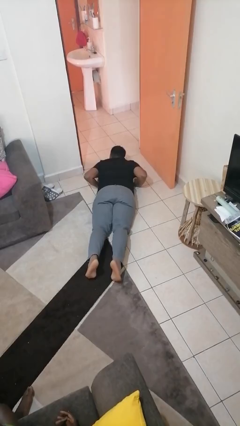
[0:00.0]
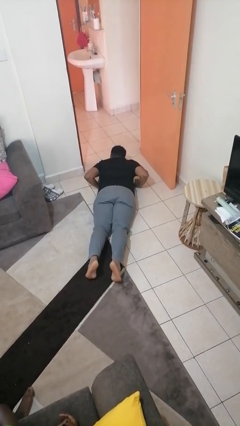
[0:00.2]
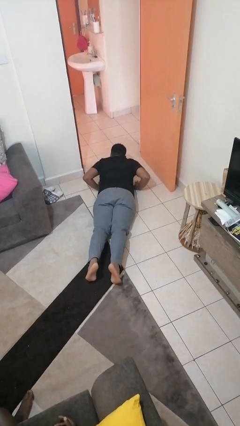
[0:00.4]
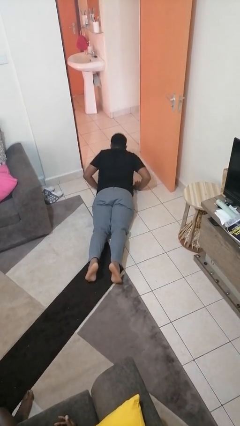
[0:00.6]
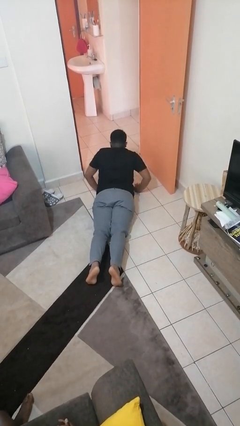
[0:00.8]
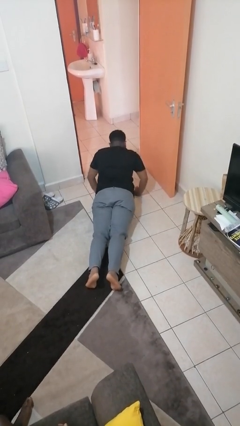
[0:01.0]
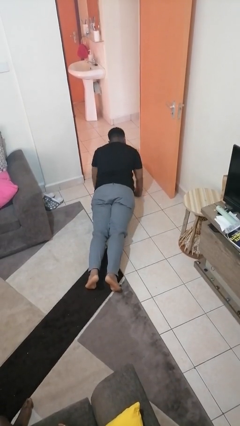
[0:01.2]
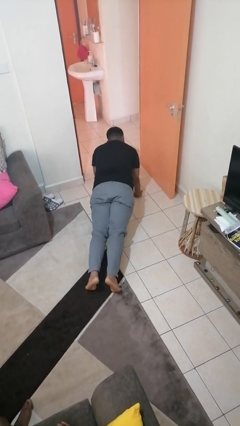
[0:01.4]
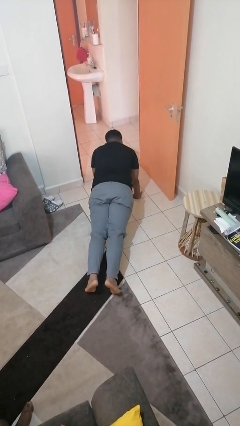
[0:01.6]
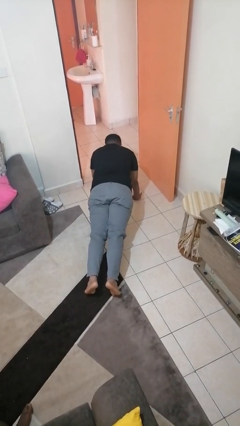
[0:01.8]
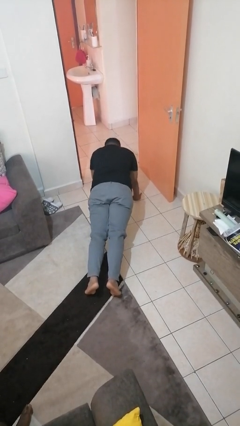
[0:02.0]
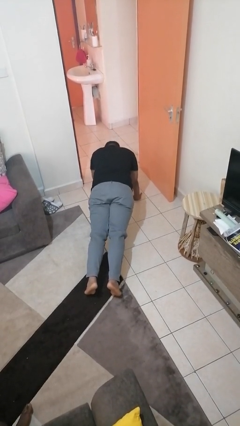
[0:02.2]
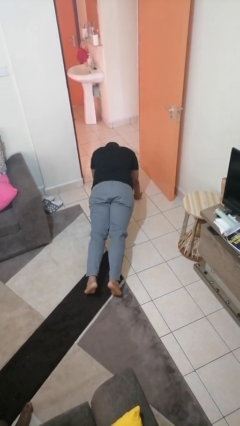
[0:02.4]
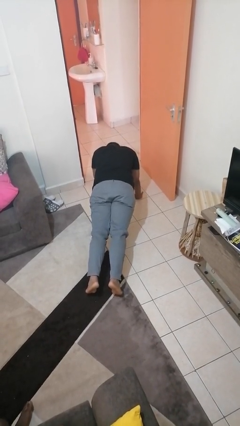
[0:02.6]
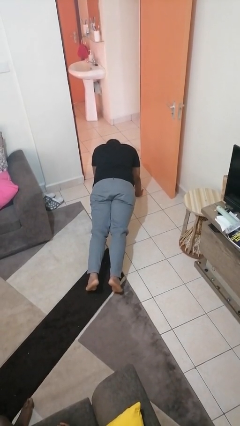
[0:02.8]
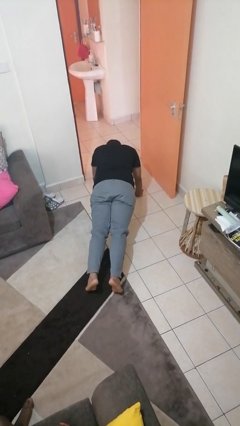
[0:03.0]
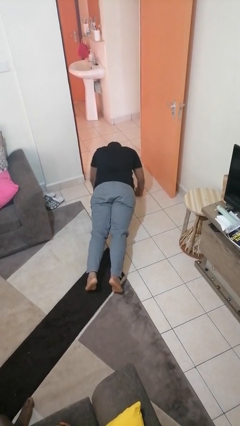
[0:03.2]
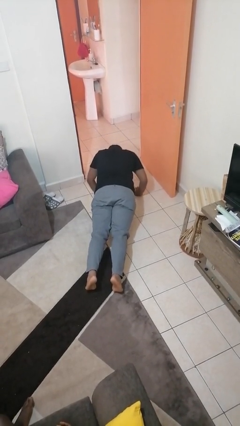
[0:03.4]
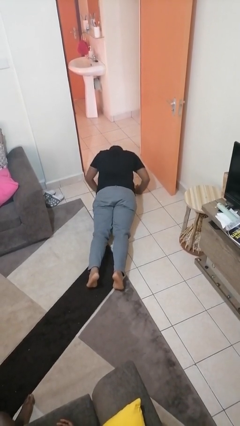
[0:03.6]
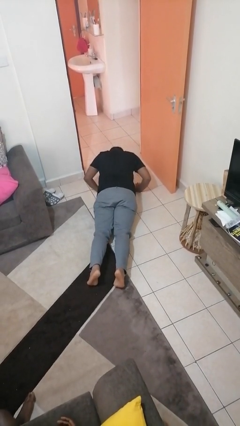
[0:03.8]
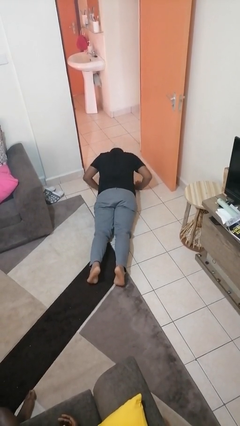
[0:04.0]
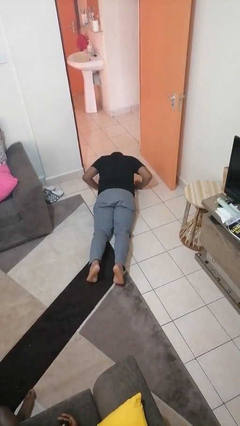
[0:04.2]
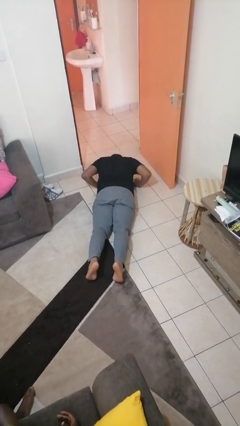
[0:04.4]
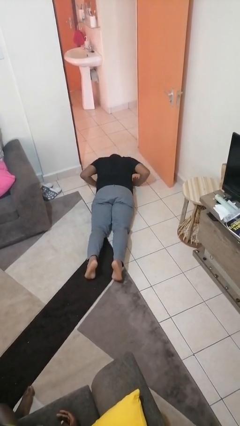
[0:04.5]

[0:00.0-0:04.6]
person exercises with pushup

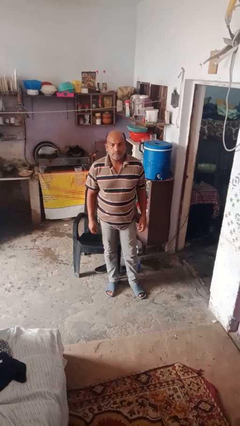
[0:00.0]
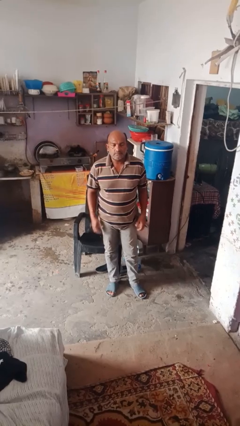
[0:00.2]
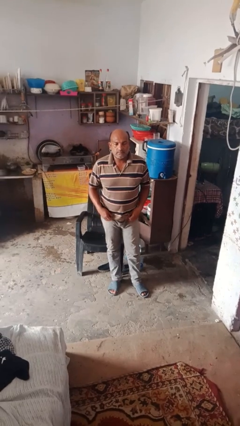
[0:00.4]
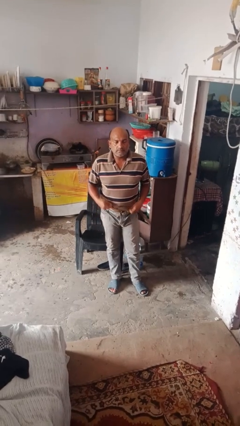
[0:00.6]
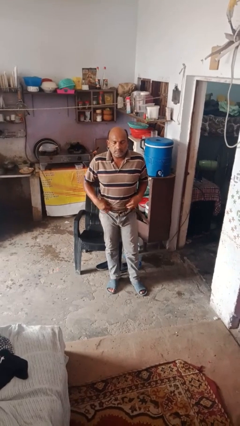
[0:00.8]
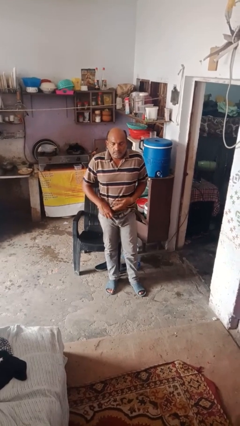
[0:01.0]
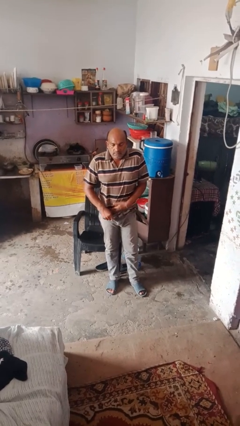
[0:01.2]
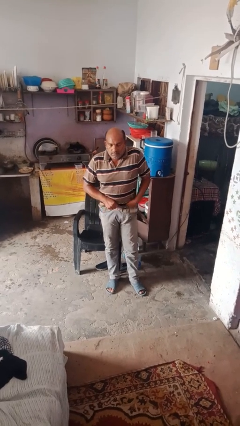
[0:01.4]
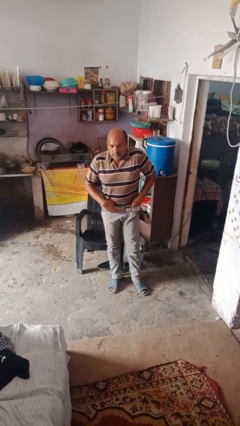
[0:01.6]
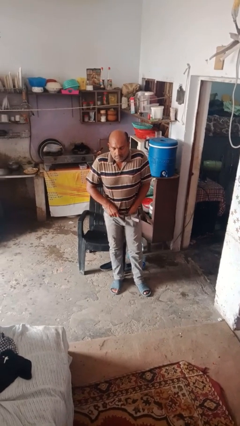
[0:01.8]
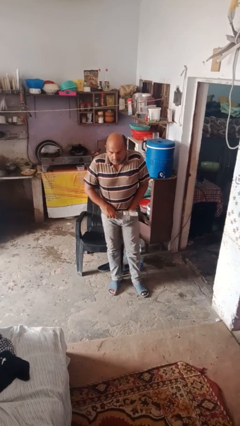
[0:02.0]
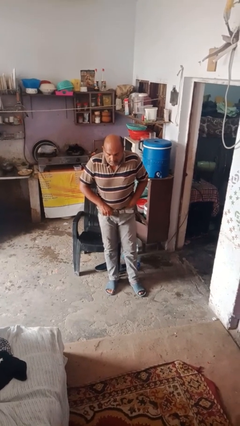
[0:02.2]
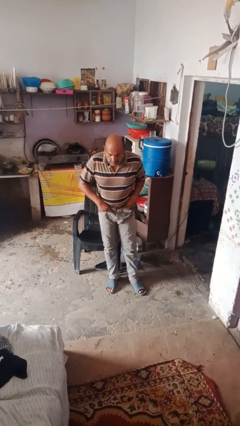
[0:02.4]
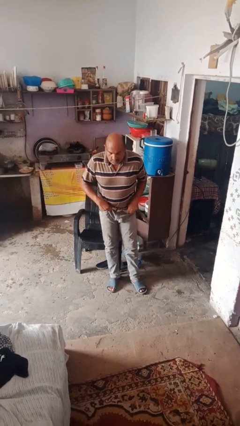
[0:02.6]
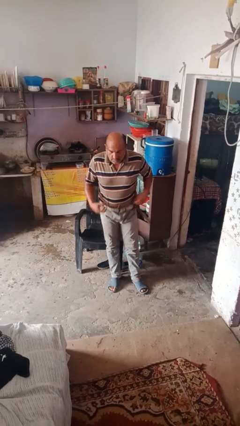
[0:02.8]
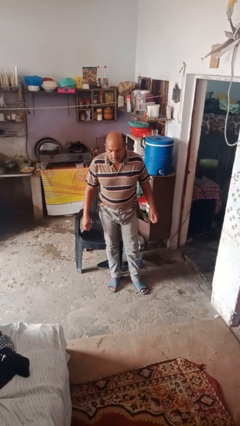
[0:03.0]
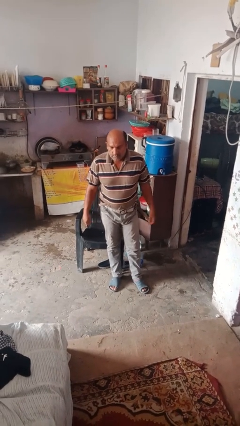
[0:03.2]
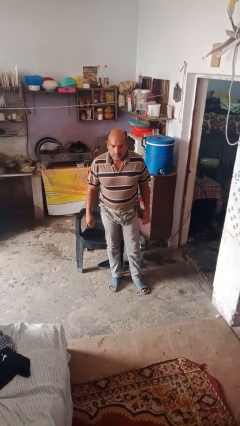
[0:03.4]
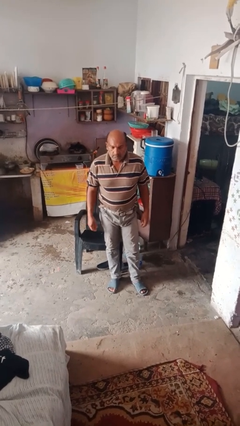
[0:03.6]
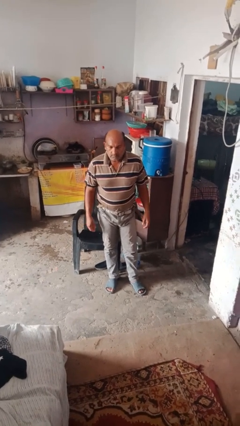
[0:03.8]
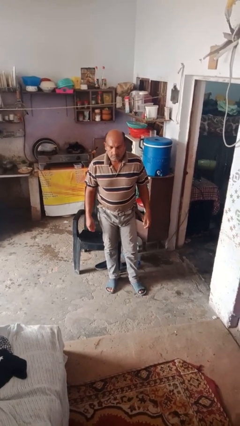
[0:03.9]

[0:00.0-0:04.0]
person tucks in shirt

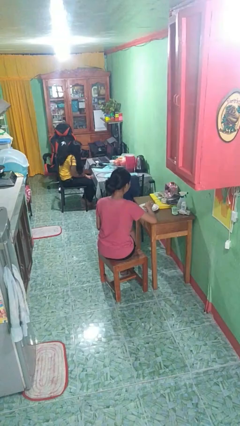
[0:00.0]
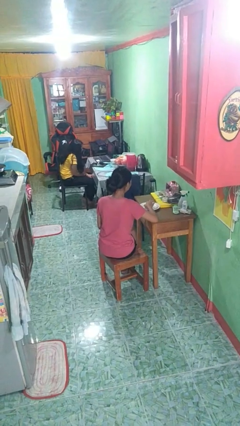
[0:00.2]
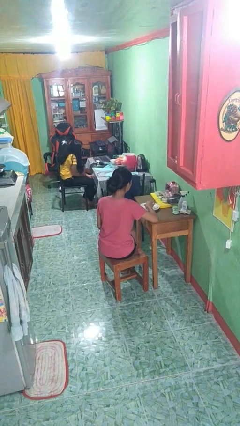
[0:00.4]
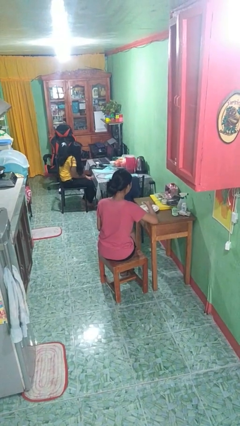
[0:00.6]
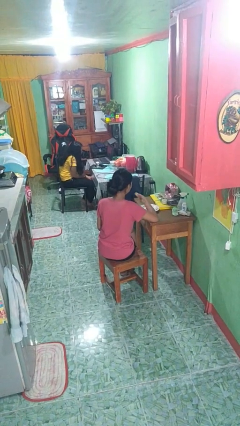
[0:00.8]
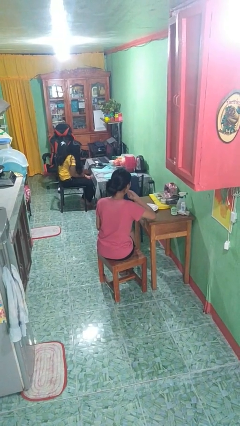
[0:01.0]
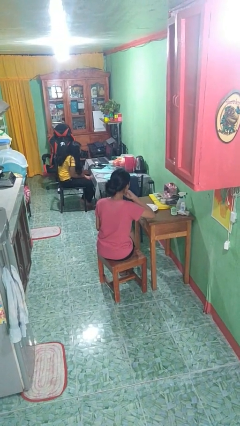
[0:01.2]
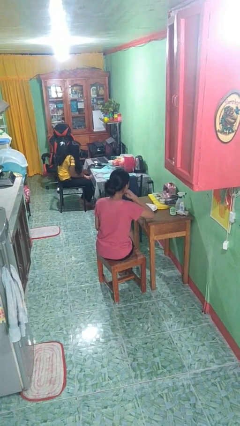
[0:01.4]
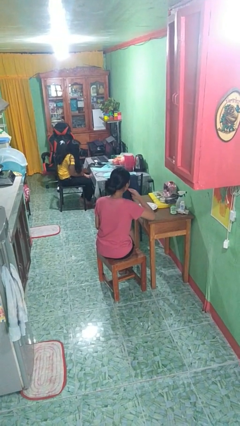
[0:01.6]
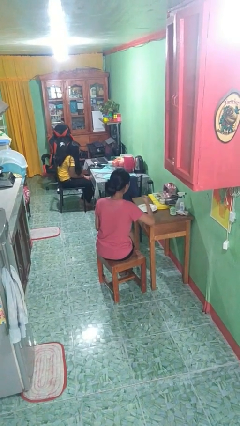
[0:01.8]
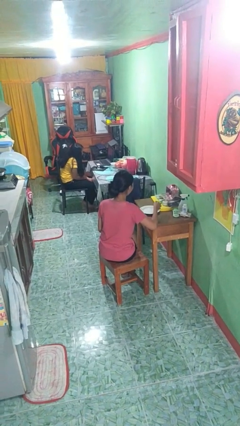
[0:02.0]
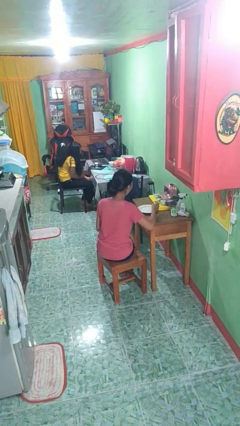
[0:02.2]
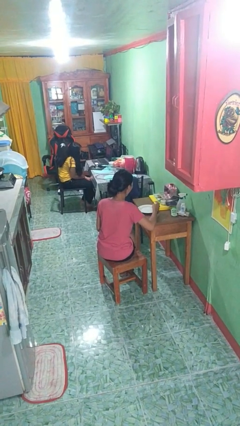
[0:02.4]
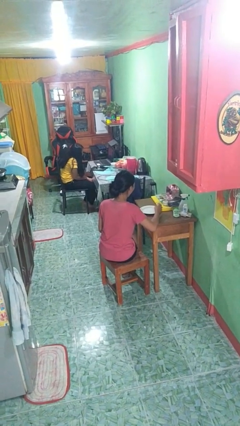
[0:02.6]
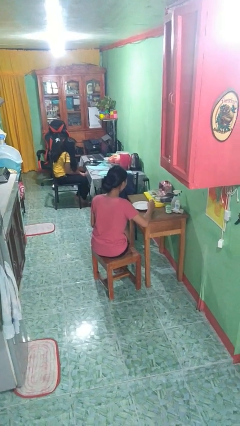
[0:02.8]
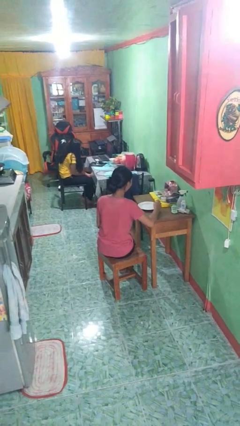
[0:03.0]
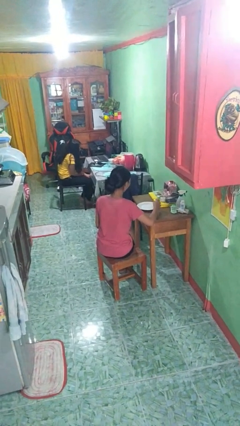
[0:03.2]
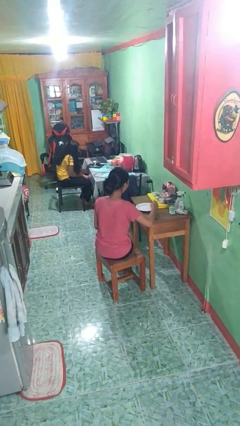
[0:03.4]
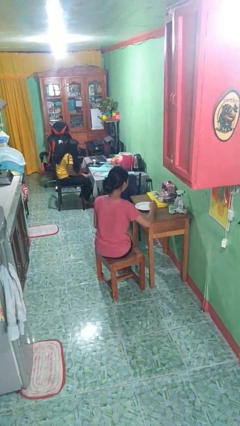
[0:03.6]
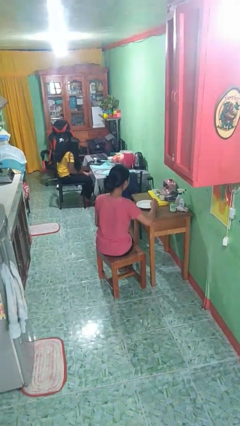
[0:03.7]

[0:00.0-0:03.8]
person eats with hands

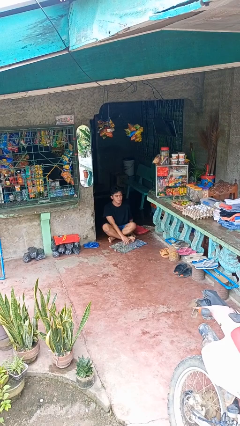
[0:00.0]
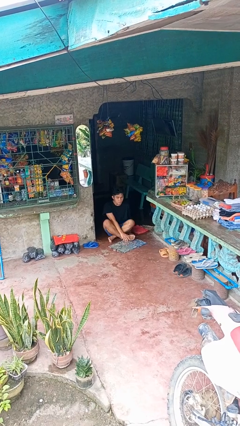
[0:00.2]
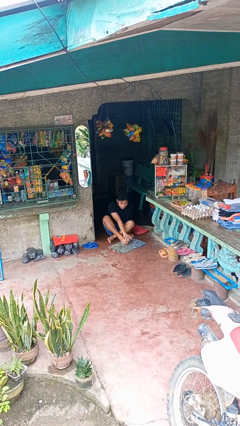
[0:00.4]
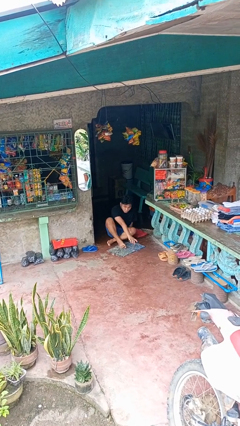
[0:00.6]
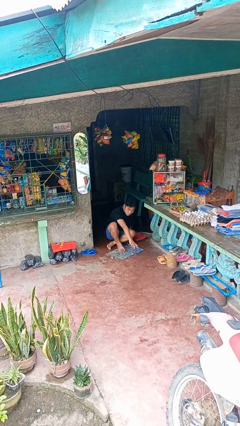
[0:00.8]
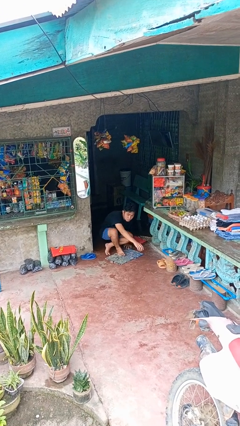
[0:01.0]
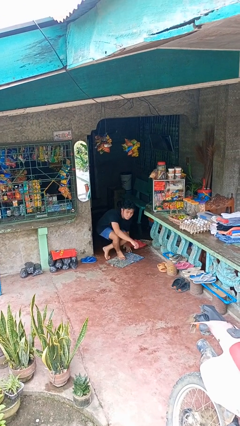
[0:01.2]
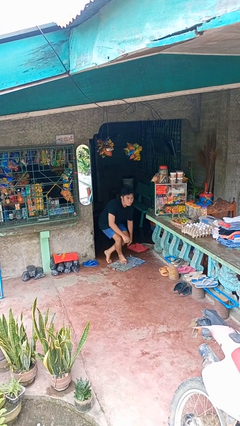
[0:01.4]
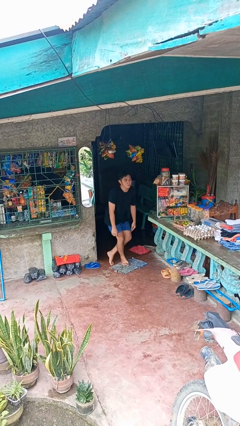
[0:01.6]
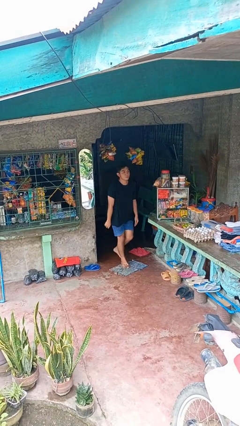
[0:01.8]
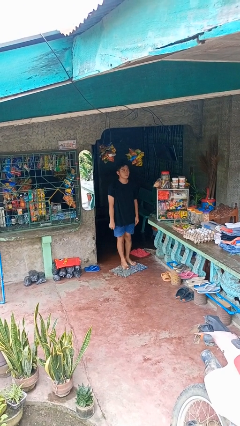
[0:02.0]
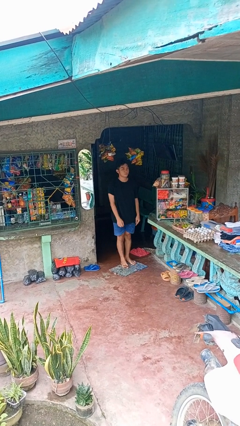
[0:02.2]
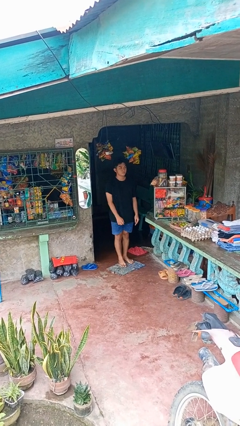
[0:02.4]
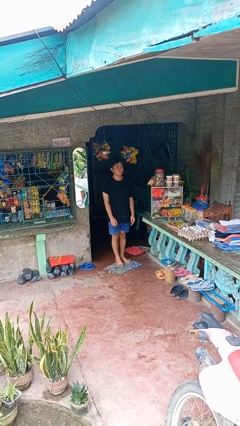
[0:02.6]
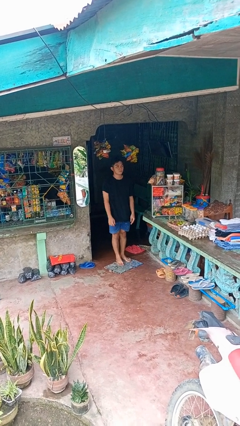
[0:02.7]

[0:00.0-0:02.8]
person stands up from floor

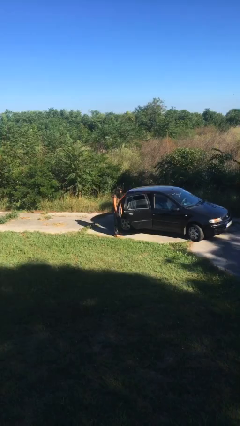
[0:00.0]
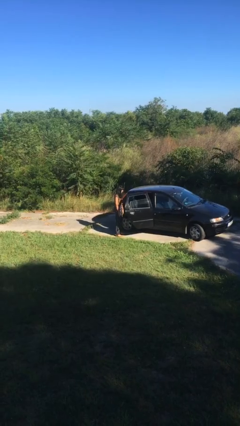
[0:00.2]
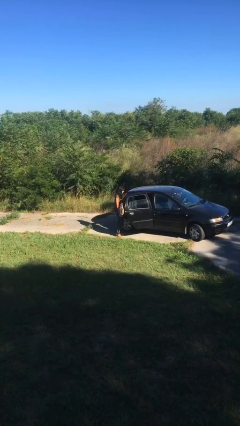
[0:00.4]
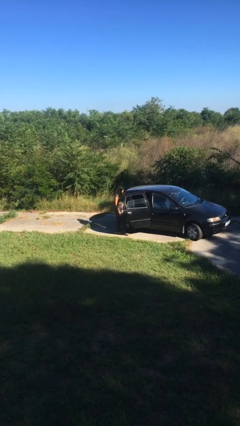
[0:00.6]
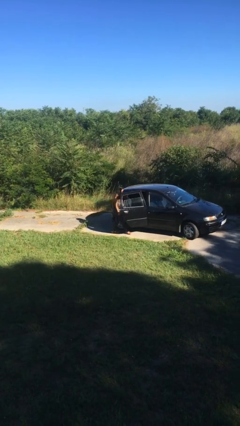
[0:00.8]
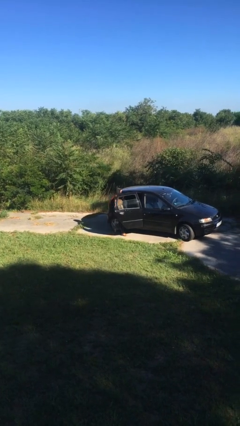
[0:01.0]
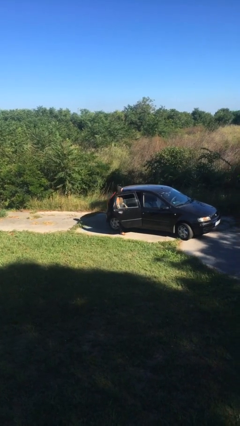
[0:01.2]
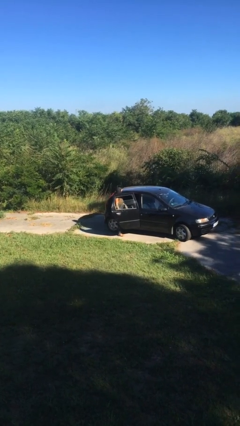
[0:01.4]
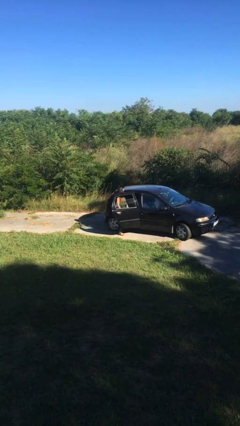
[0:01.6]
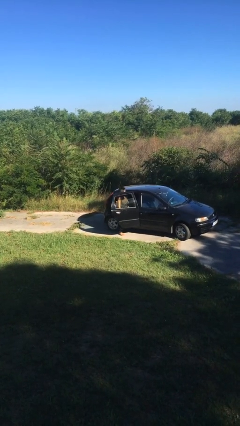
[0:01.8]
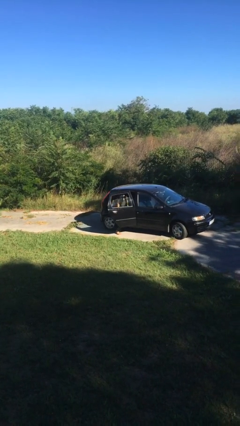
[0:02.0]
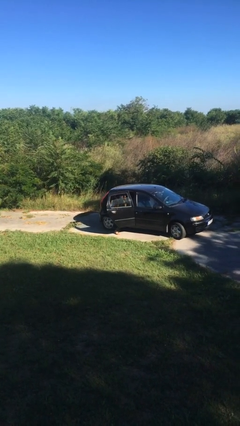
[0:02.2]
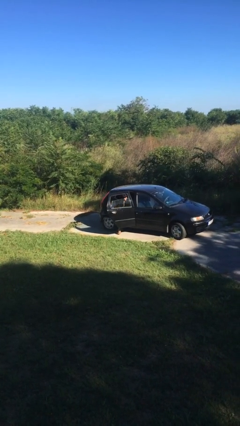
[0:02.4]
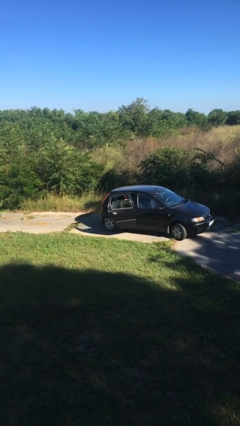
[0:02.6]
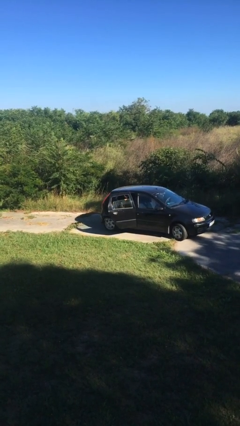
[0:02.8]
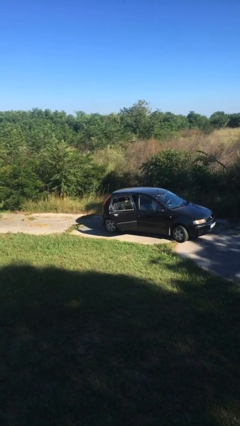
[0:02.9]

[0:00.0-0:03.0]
person enters car
